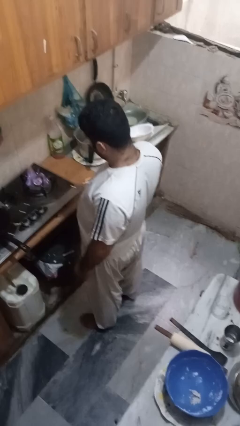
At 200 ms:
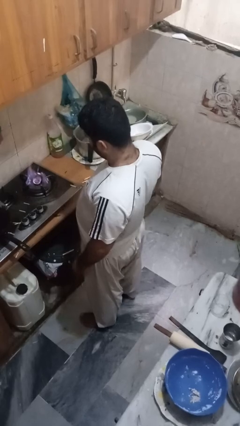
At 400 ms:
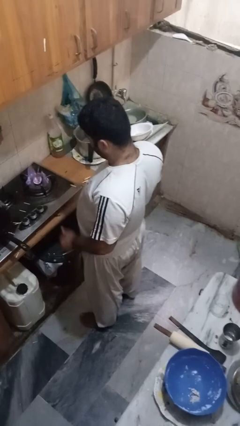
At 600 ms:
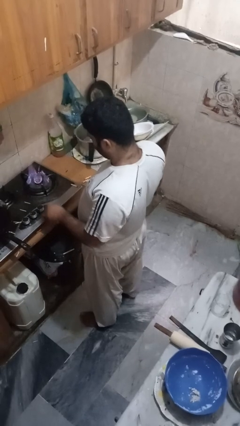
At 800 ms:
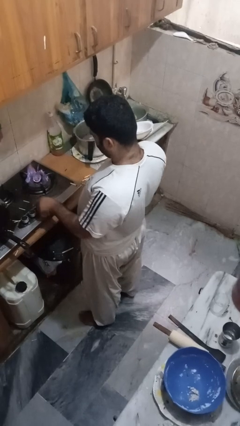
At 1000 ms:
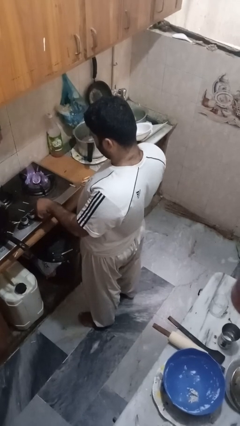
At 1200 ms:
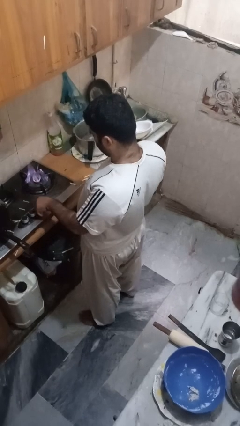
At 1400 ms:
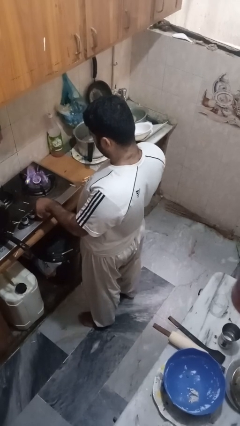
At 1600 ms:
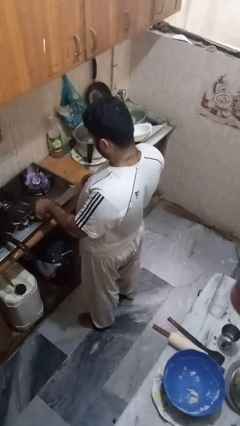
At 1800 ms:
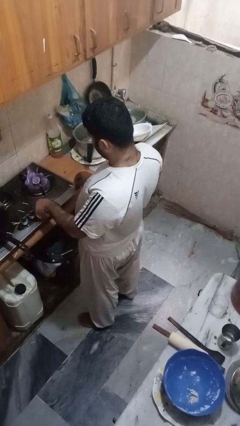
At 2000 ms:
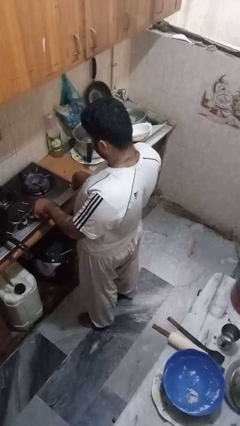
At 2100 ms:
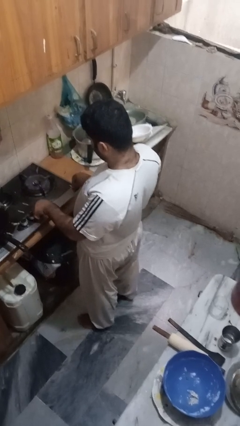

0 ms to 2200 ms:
person turns off stovetop

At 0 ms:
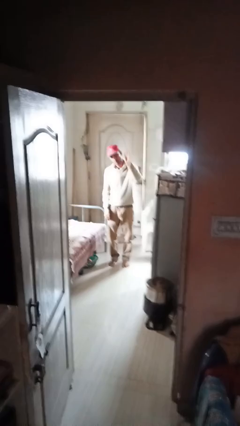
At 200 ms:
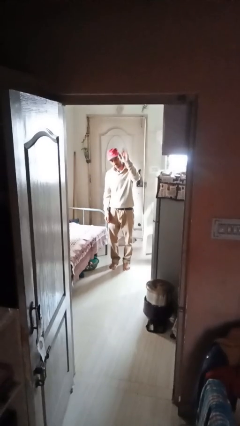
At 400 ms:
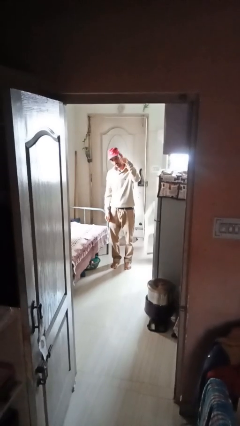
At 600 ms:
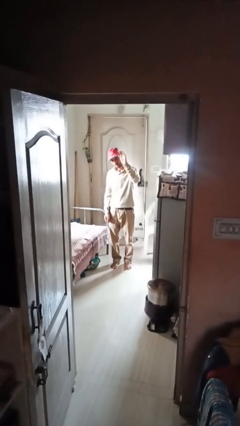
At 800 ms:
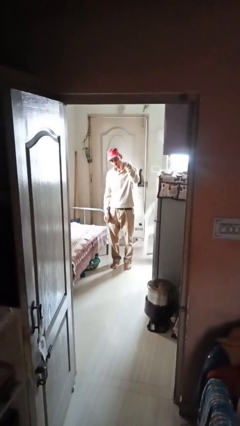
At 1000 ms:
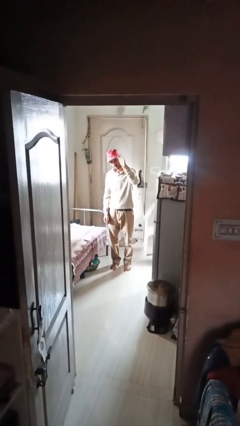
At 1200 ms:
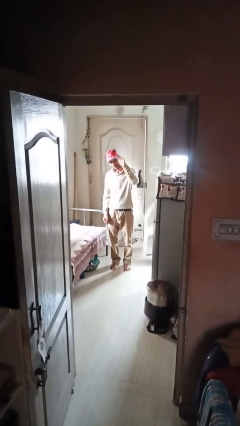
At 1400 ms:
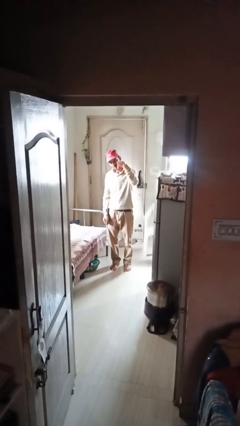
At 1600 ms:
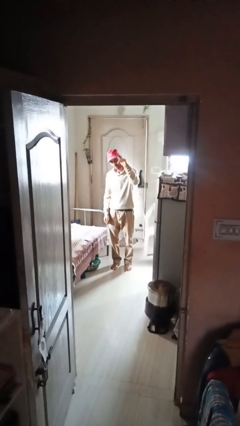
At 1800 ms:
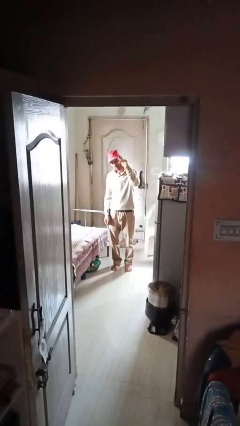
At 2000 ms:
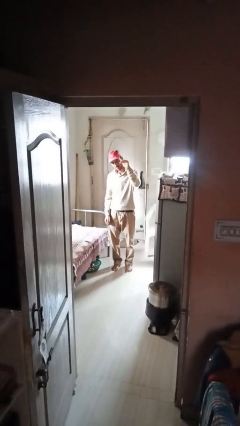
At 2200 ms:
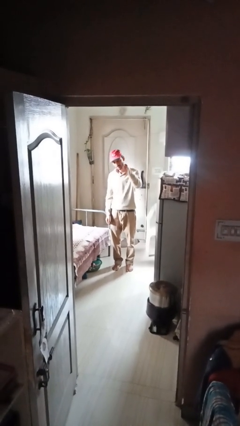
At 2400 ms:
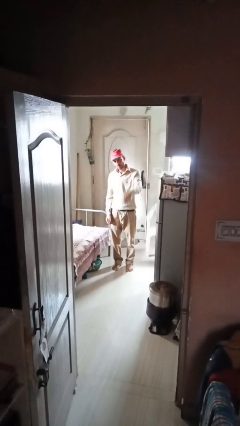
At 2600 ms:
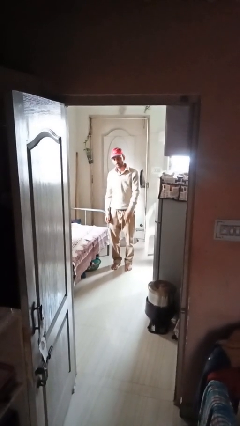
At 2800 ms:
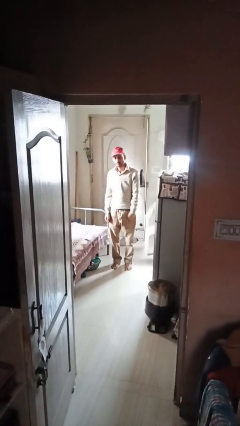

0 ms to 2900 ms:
person gestures come here

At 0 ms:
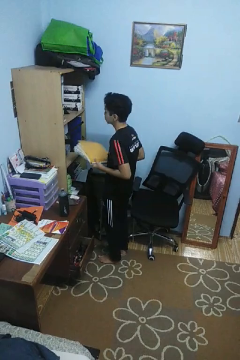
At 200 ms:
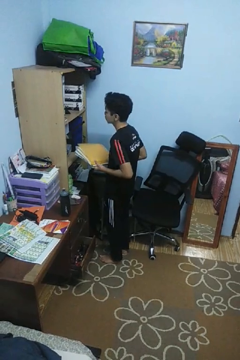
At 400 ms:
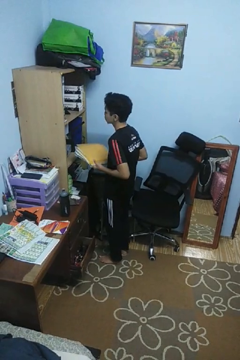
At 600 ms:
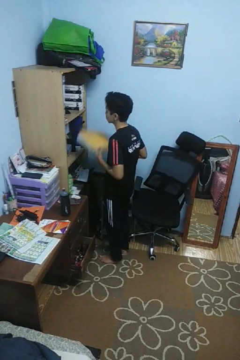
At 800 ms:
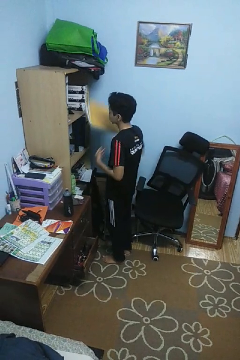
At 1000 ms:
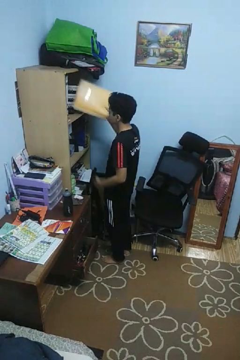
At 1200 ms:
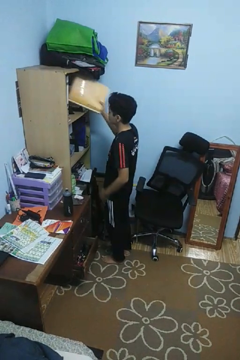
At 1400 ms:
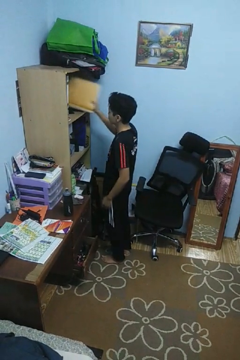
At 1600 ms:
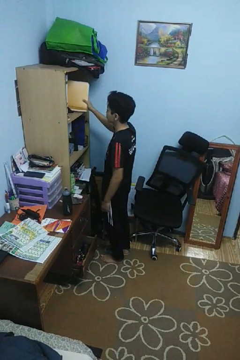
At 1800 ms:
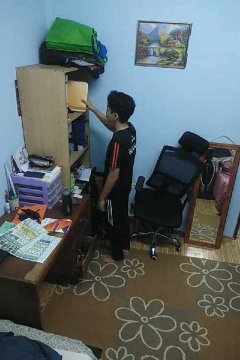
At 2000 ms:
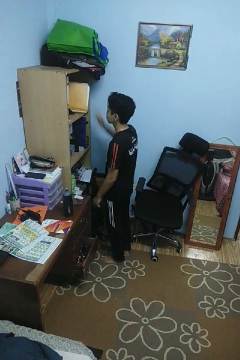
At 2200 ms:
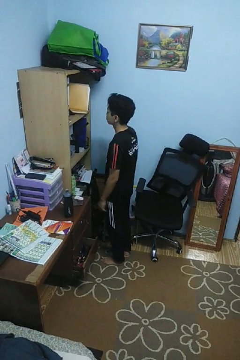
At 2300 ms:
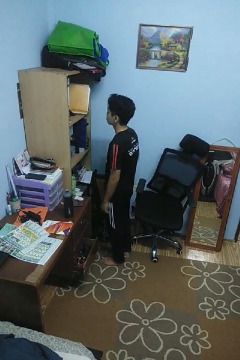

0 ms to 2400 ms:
person puts down object into cabinet

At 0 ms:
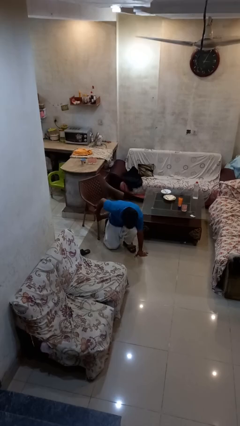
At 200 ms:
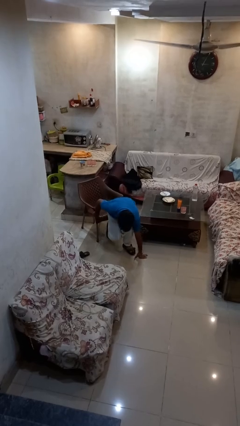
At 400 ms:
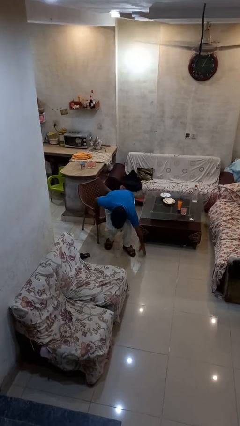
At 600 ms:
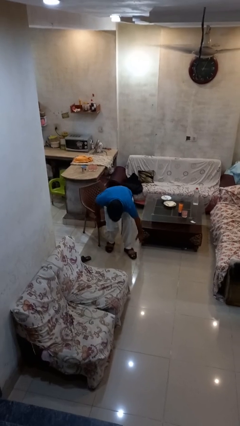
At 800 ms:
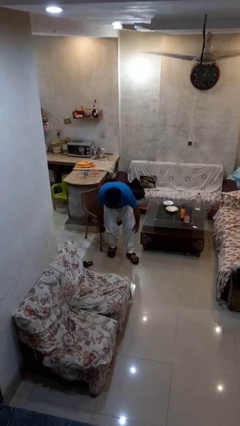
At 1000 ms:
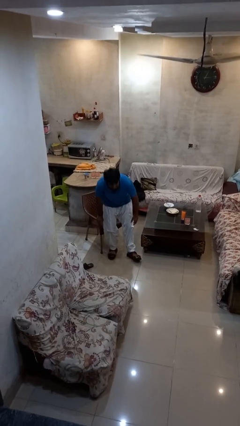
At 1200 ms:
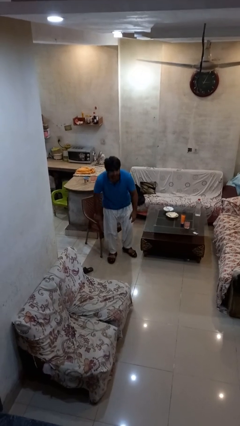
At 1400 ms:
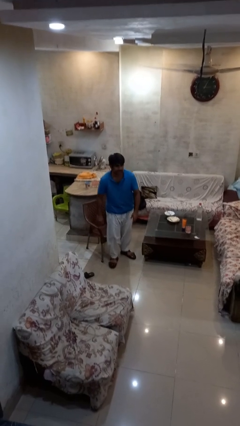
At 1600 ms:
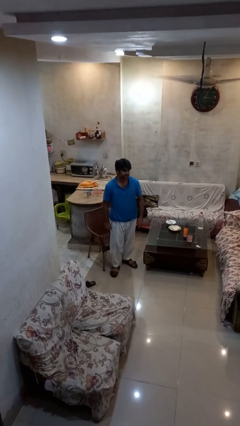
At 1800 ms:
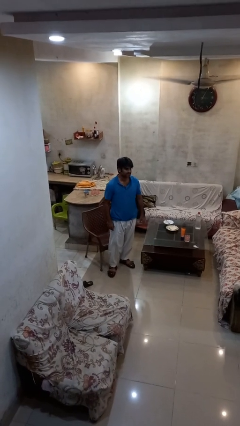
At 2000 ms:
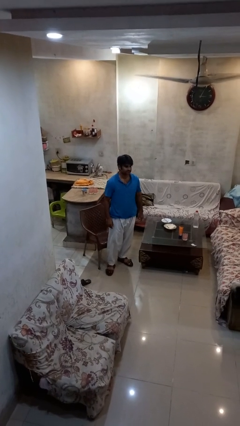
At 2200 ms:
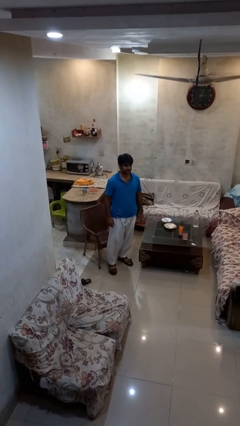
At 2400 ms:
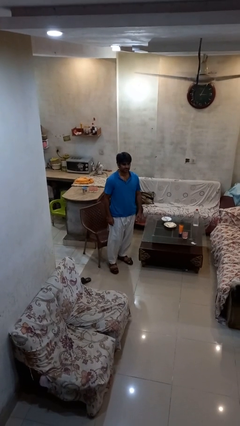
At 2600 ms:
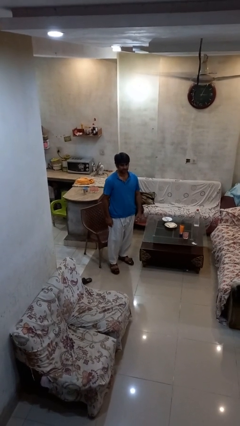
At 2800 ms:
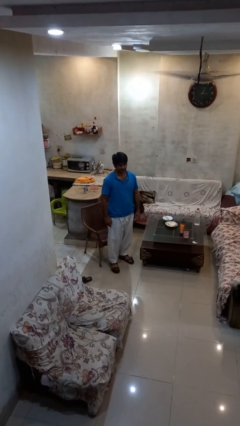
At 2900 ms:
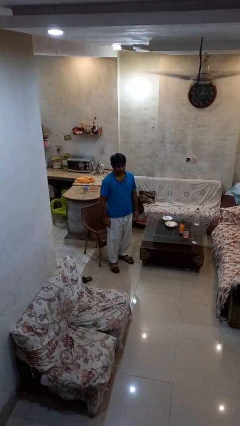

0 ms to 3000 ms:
person stands up from floor

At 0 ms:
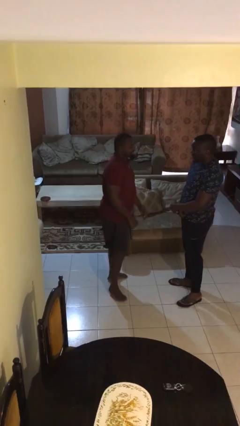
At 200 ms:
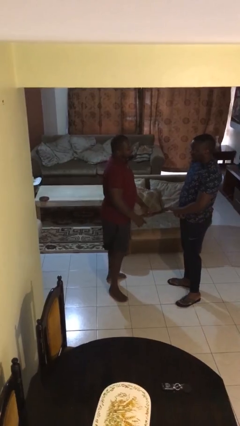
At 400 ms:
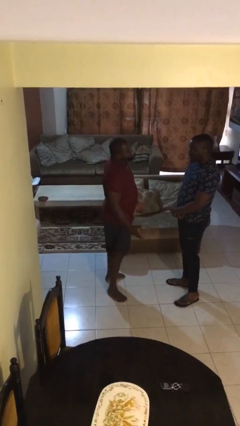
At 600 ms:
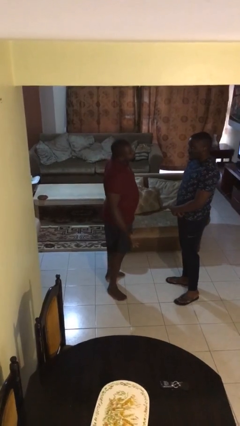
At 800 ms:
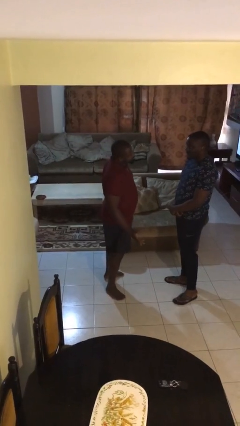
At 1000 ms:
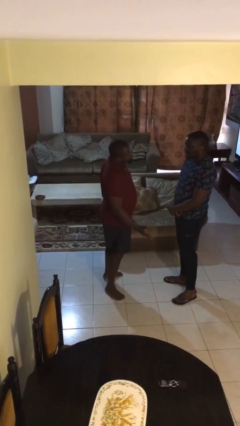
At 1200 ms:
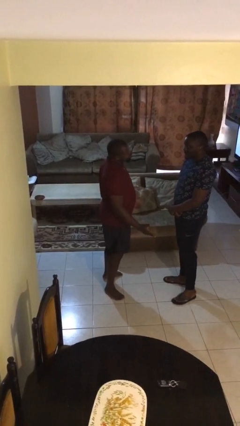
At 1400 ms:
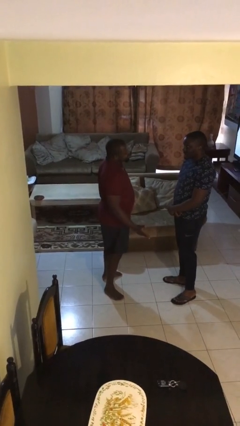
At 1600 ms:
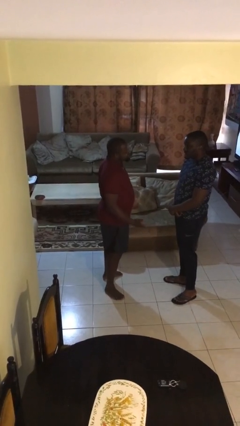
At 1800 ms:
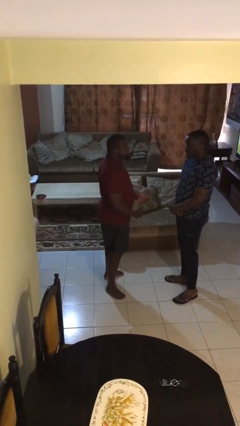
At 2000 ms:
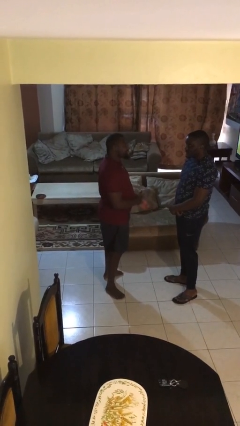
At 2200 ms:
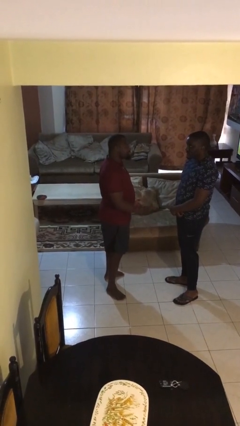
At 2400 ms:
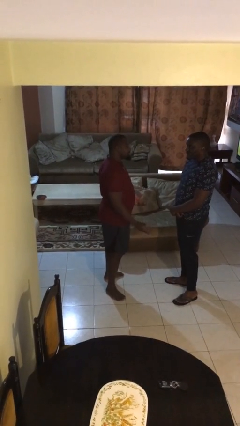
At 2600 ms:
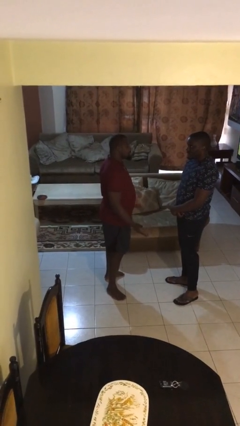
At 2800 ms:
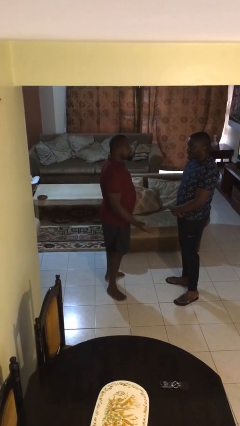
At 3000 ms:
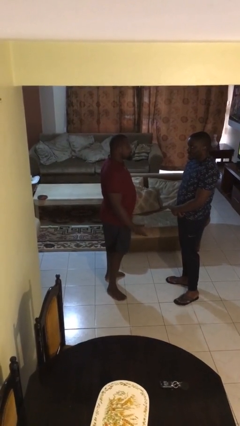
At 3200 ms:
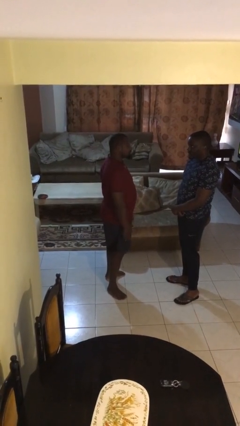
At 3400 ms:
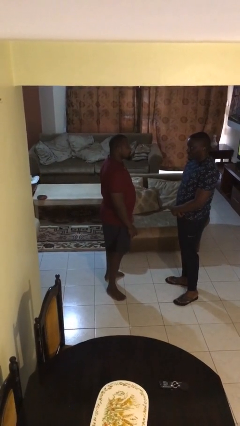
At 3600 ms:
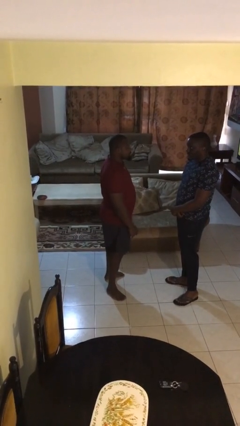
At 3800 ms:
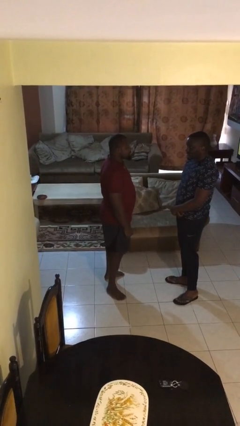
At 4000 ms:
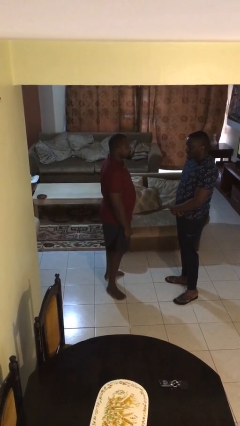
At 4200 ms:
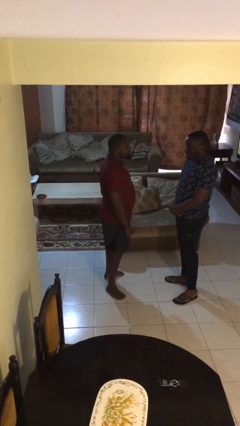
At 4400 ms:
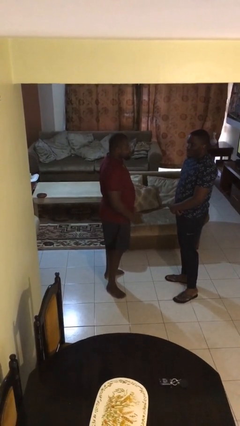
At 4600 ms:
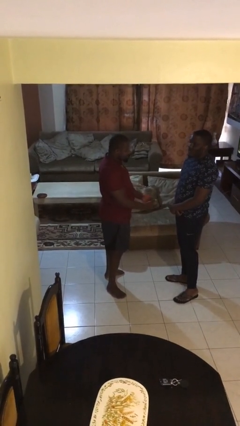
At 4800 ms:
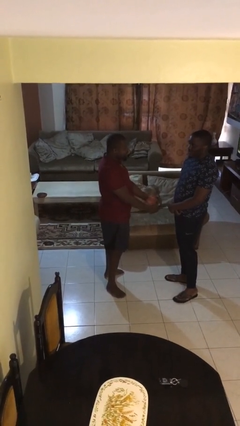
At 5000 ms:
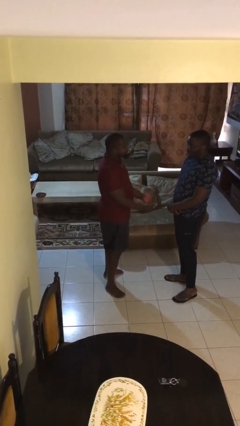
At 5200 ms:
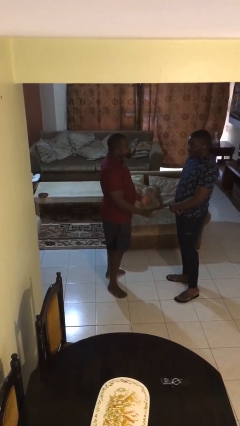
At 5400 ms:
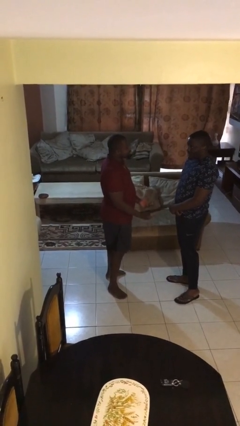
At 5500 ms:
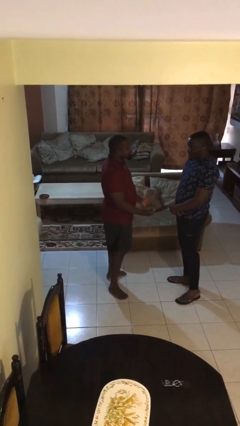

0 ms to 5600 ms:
person talks to person

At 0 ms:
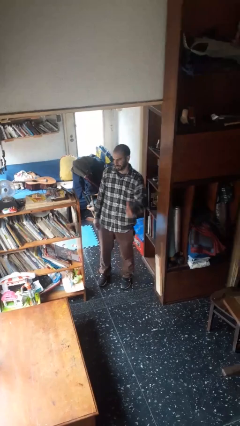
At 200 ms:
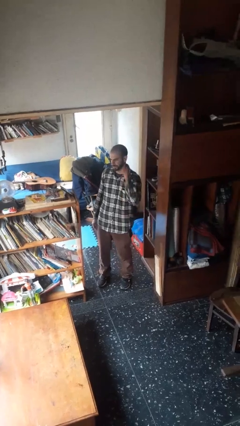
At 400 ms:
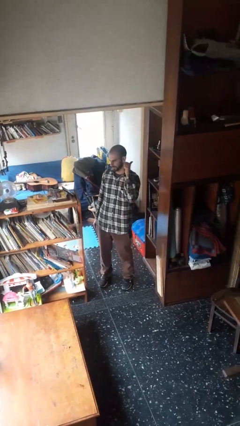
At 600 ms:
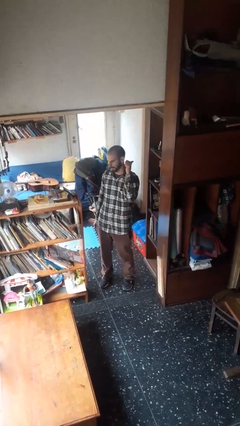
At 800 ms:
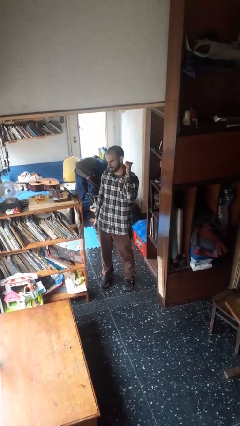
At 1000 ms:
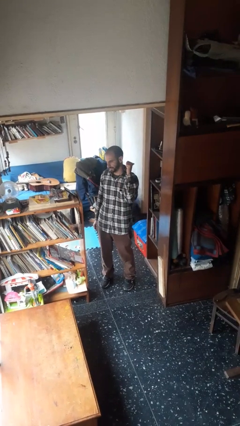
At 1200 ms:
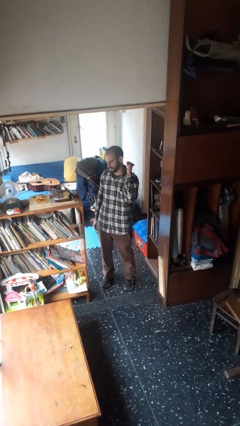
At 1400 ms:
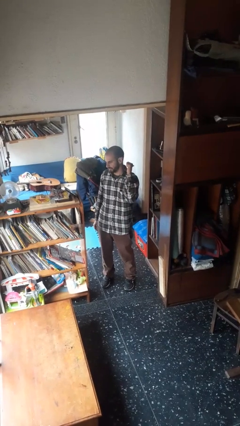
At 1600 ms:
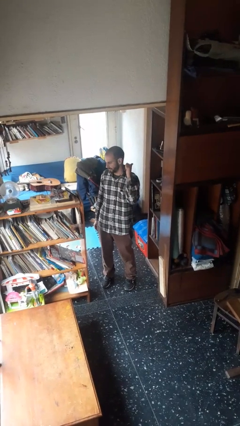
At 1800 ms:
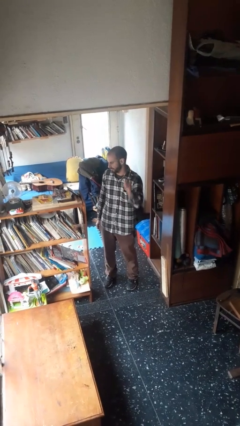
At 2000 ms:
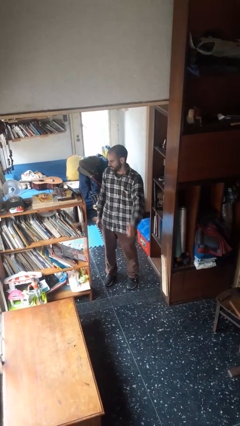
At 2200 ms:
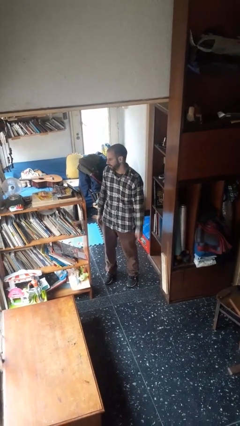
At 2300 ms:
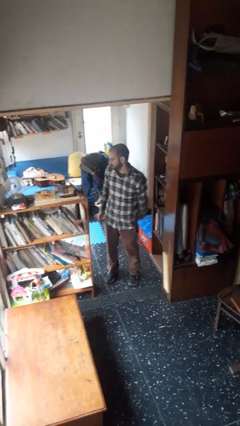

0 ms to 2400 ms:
person gestures behind me
